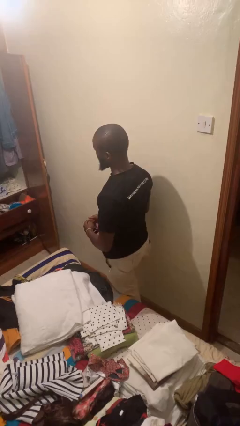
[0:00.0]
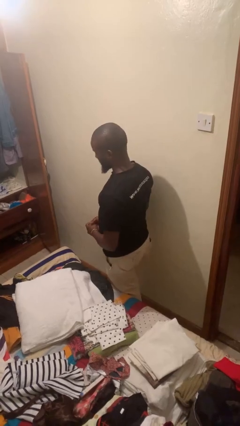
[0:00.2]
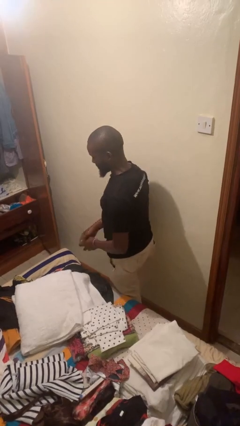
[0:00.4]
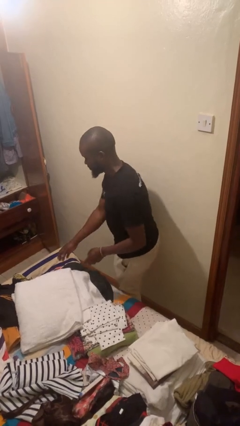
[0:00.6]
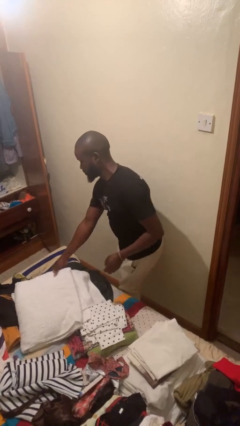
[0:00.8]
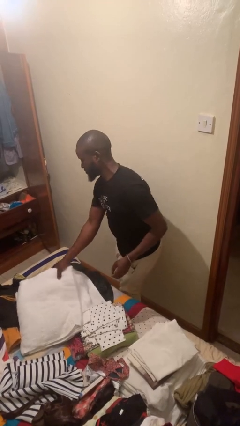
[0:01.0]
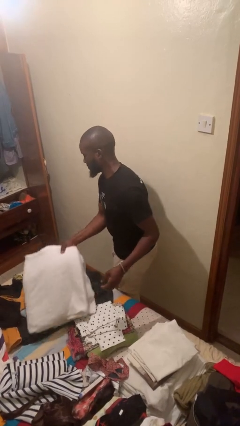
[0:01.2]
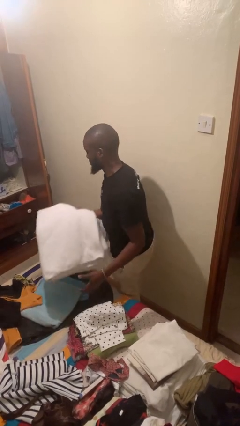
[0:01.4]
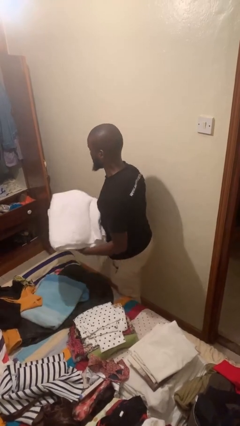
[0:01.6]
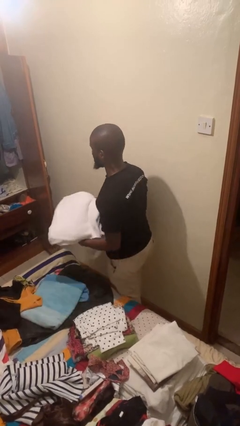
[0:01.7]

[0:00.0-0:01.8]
person picks up object from bed

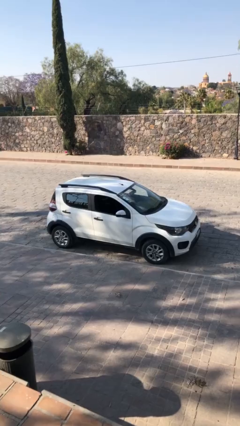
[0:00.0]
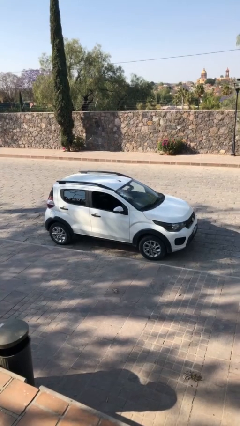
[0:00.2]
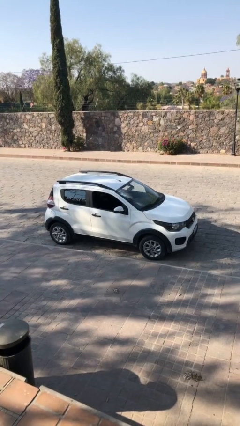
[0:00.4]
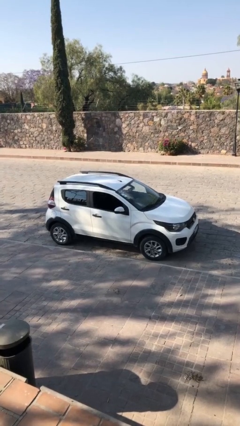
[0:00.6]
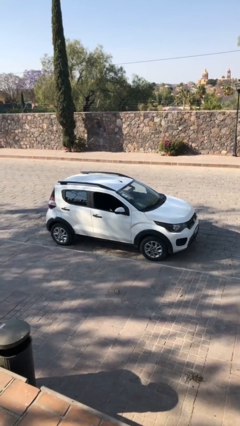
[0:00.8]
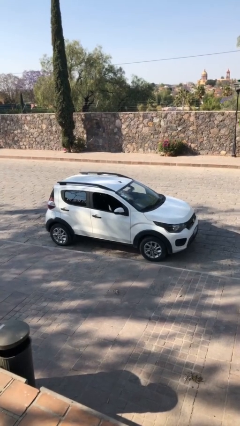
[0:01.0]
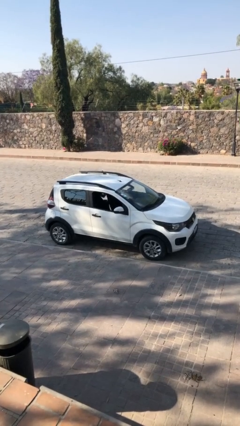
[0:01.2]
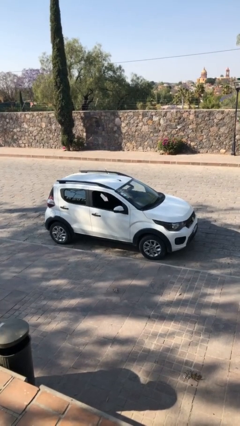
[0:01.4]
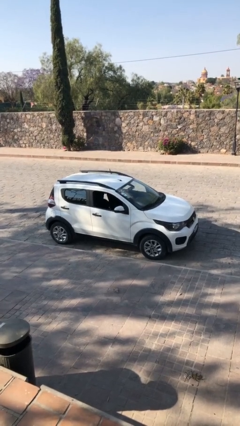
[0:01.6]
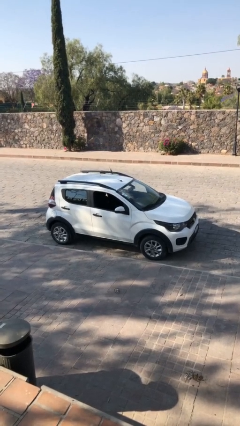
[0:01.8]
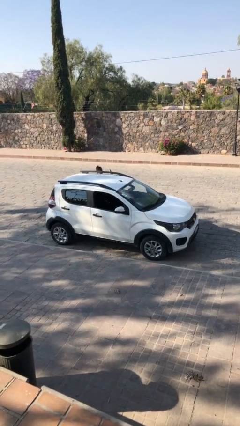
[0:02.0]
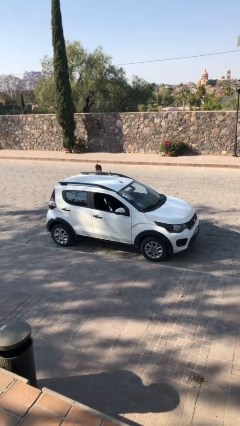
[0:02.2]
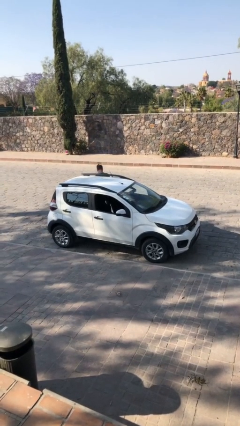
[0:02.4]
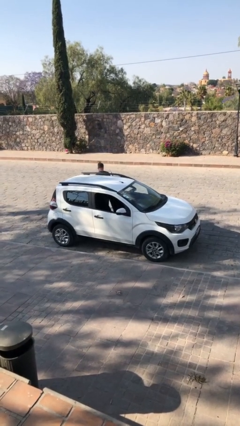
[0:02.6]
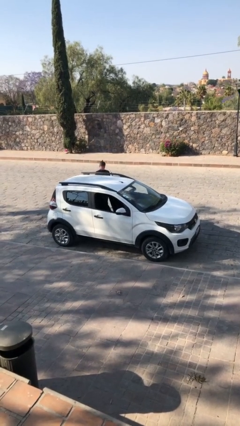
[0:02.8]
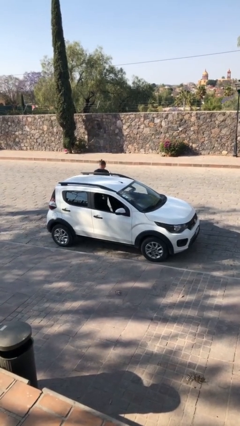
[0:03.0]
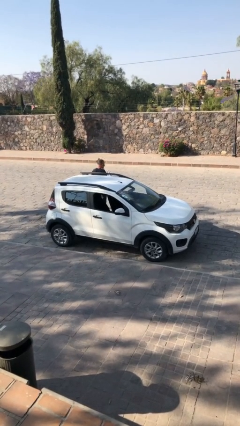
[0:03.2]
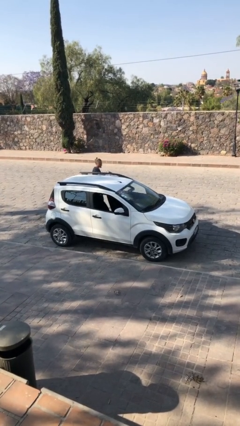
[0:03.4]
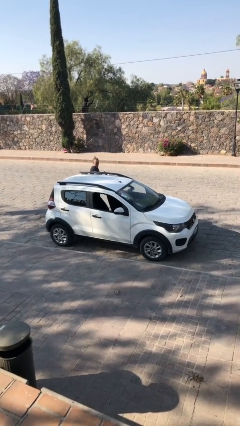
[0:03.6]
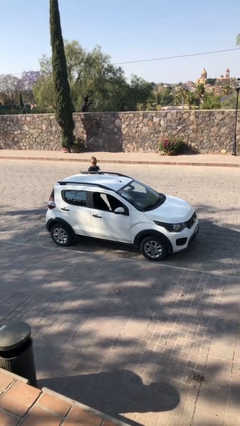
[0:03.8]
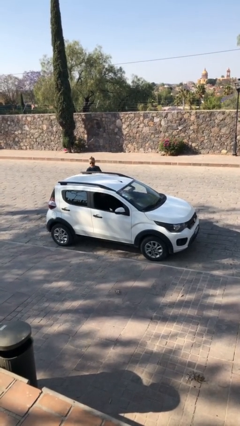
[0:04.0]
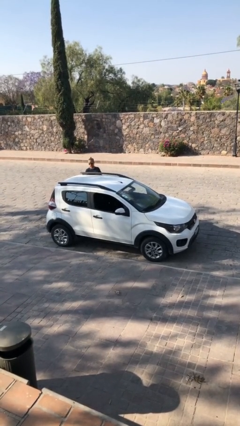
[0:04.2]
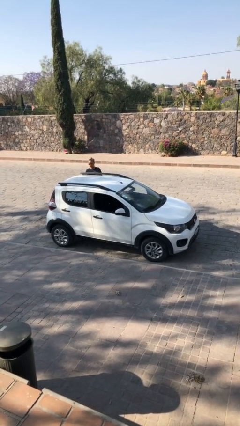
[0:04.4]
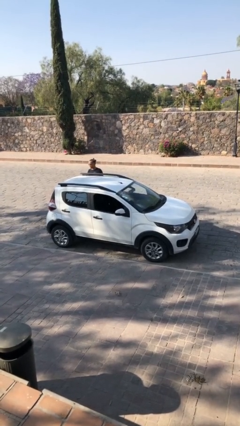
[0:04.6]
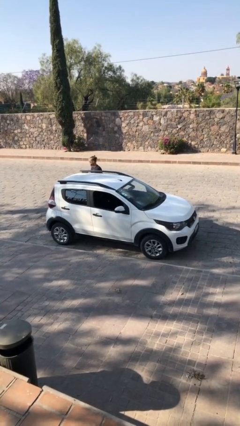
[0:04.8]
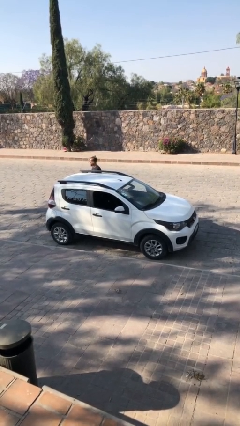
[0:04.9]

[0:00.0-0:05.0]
car drops off person

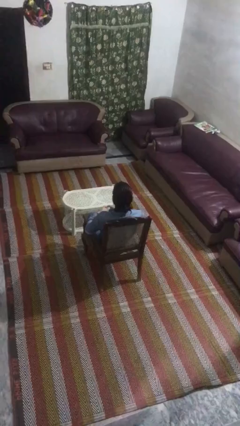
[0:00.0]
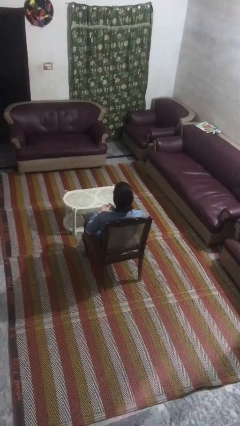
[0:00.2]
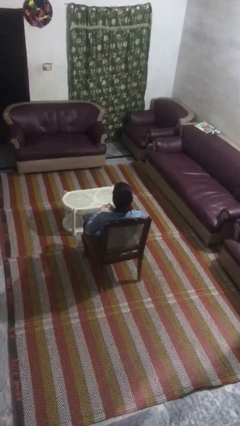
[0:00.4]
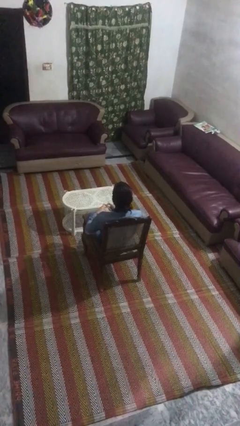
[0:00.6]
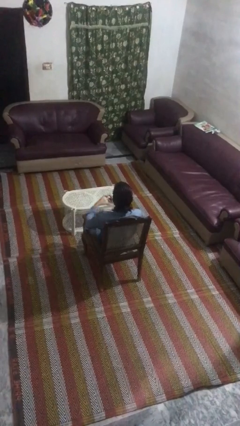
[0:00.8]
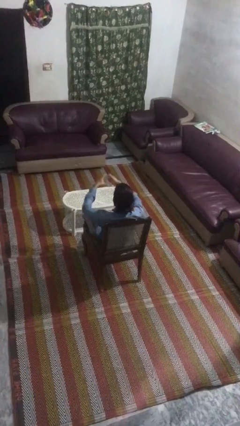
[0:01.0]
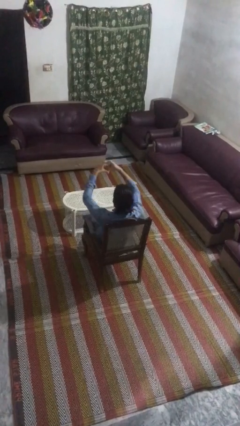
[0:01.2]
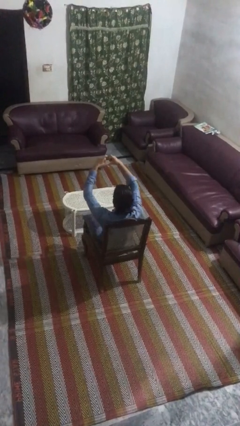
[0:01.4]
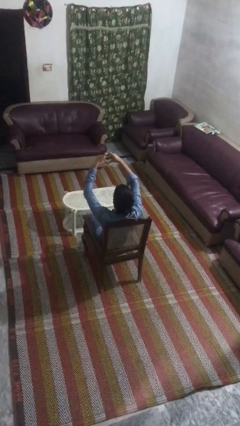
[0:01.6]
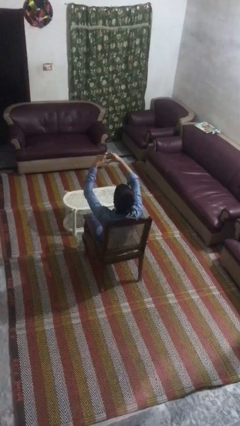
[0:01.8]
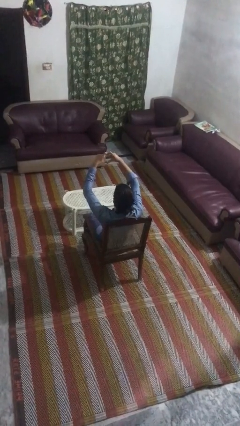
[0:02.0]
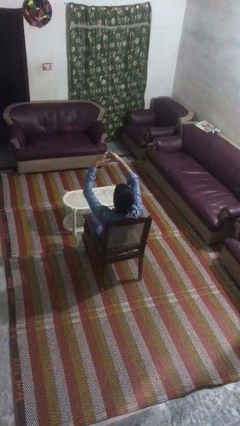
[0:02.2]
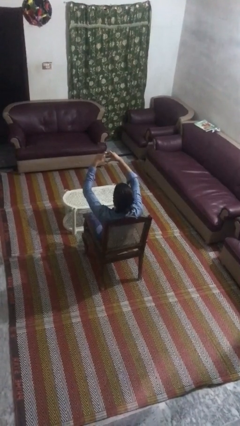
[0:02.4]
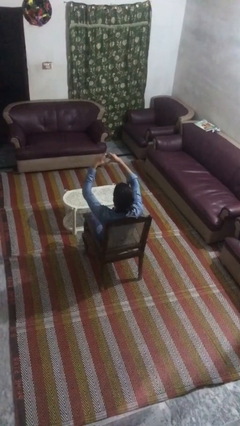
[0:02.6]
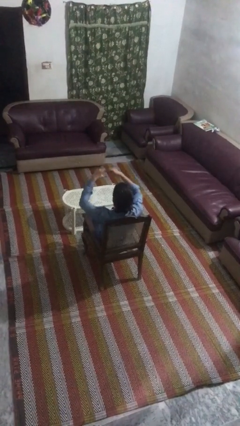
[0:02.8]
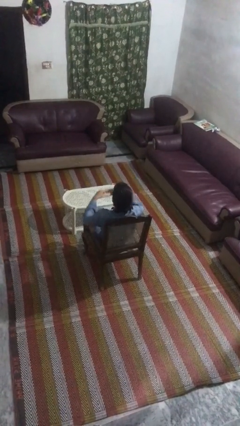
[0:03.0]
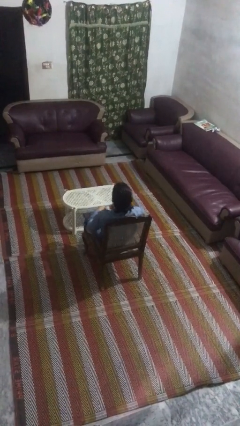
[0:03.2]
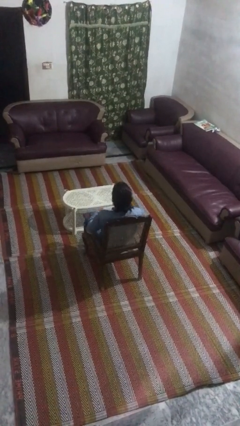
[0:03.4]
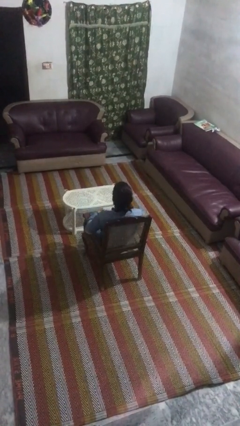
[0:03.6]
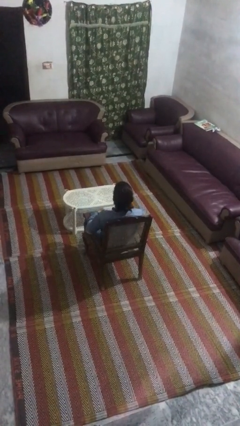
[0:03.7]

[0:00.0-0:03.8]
person gestures heart

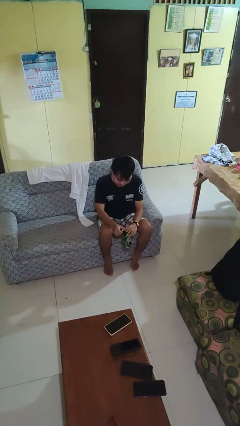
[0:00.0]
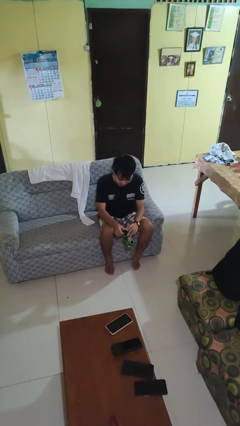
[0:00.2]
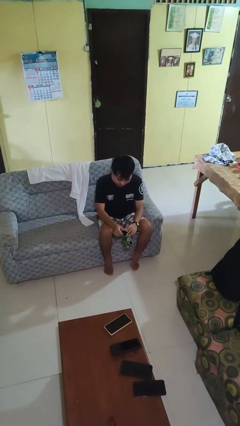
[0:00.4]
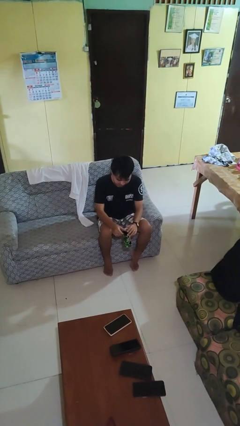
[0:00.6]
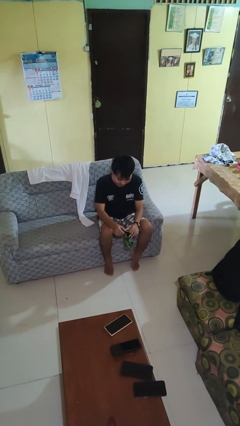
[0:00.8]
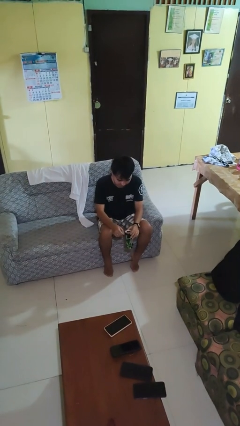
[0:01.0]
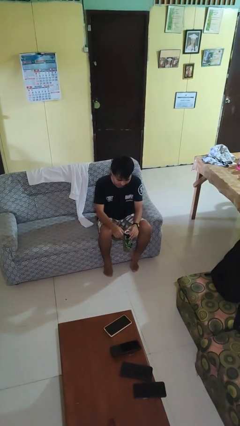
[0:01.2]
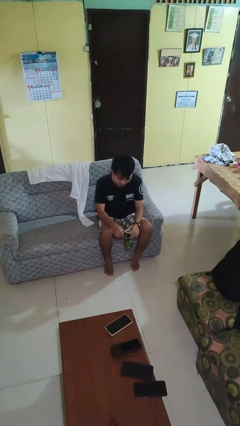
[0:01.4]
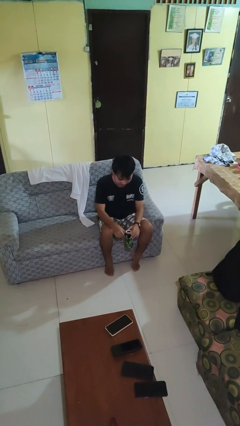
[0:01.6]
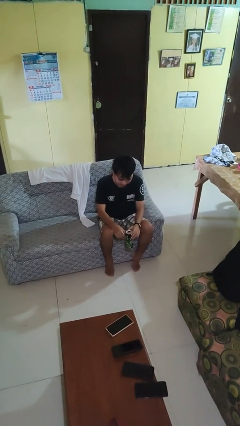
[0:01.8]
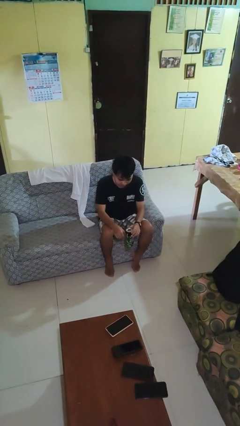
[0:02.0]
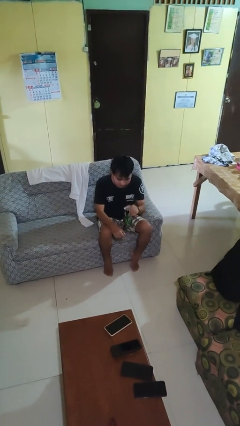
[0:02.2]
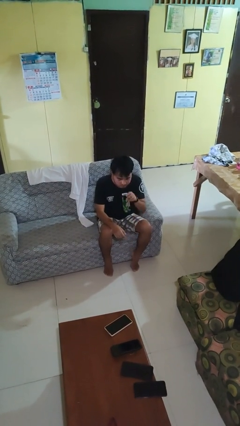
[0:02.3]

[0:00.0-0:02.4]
person opens beverage can

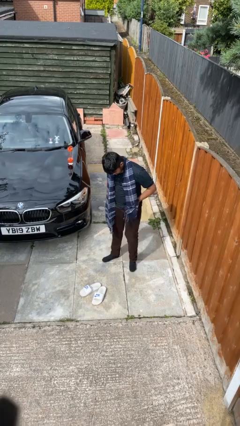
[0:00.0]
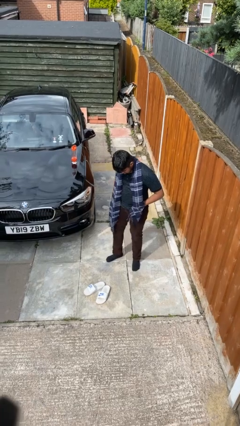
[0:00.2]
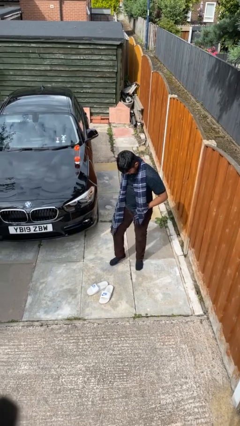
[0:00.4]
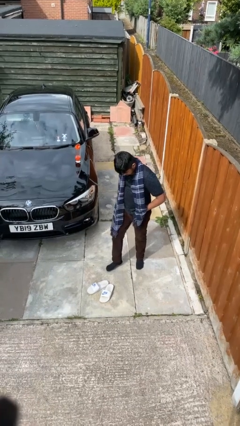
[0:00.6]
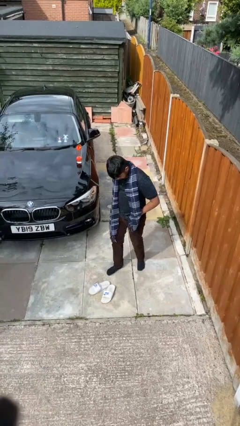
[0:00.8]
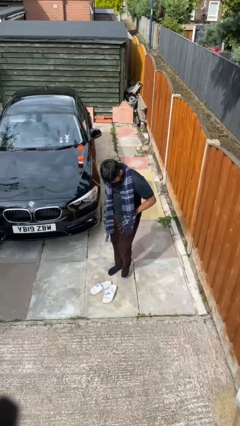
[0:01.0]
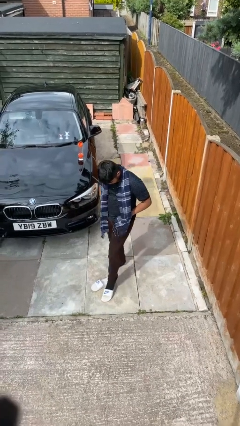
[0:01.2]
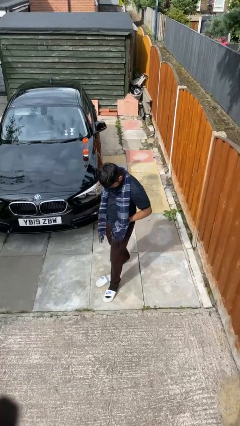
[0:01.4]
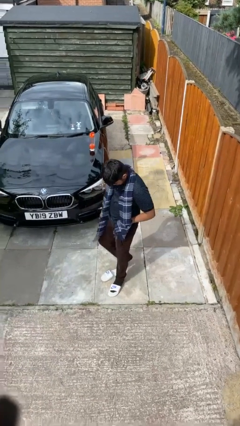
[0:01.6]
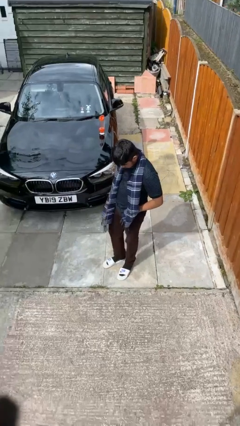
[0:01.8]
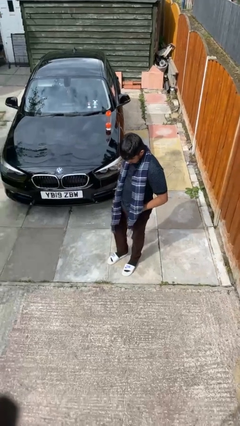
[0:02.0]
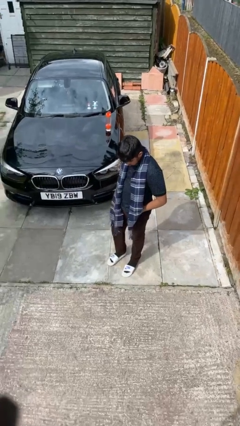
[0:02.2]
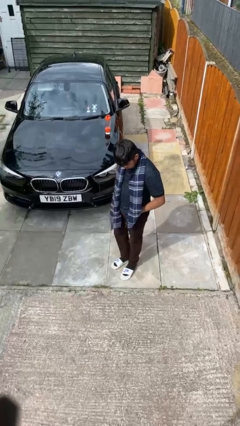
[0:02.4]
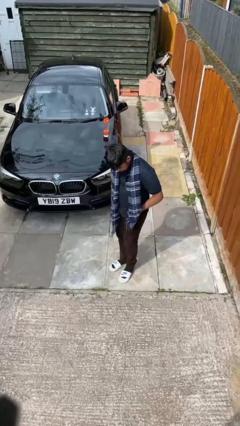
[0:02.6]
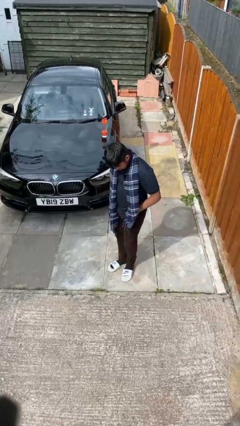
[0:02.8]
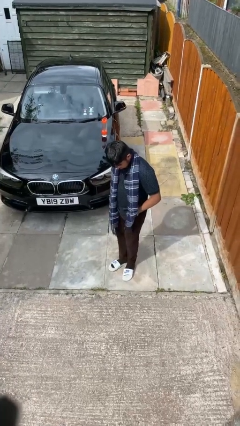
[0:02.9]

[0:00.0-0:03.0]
person puts on shoes

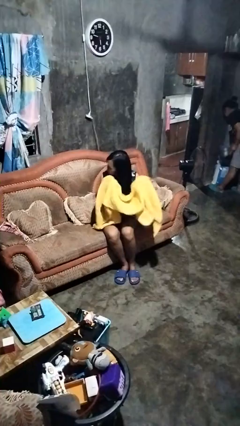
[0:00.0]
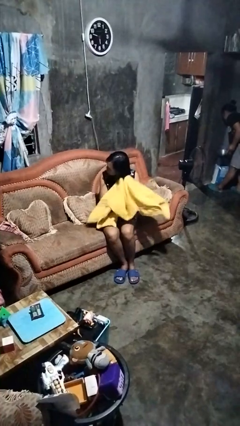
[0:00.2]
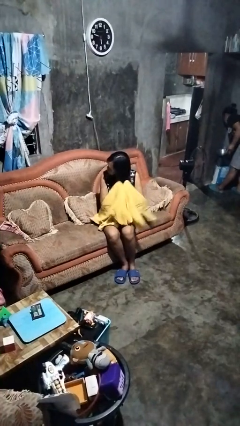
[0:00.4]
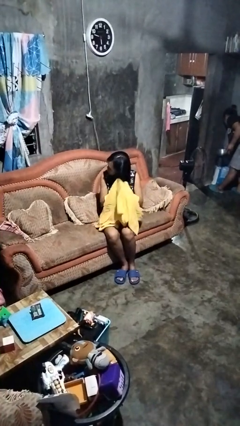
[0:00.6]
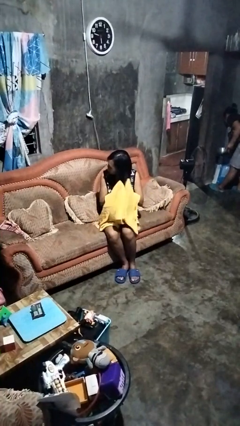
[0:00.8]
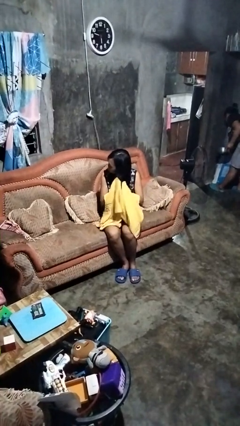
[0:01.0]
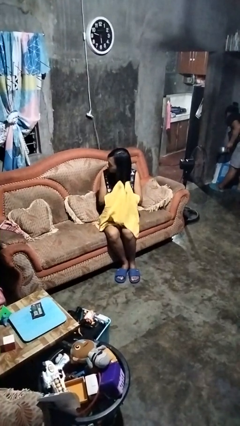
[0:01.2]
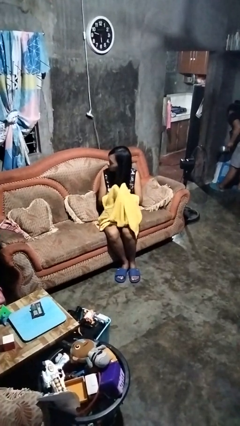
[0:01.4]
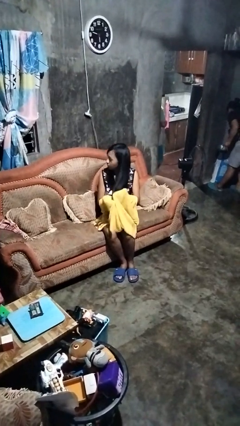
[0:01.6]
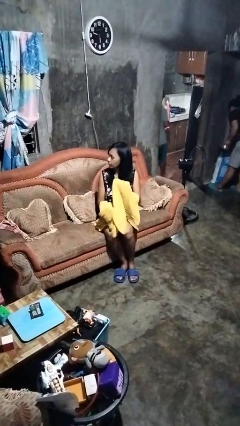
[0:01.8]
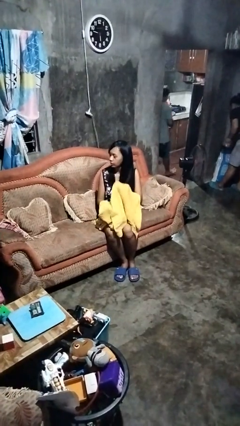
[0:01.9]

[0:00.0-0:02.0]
person dries hair with towel
